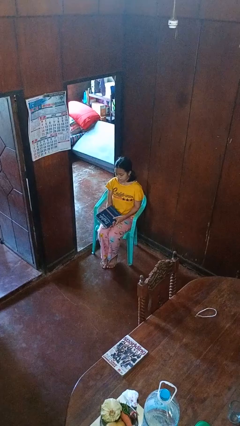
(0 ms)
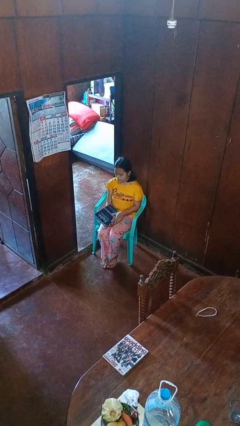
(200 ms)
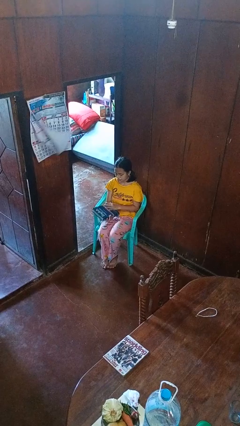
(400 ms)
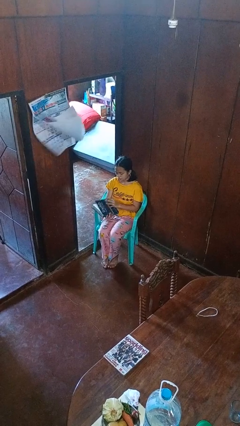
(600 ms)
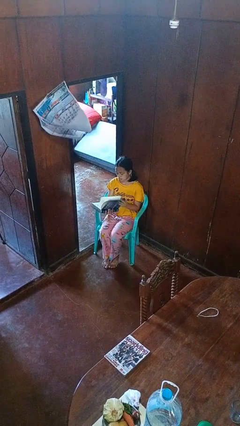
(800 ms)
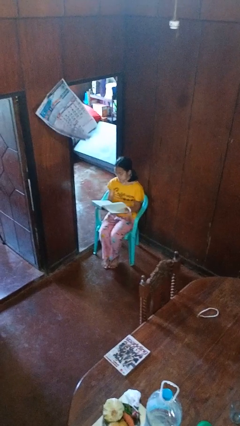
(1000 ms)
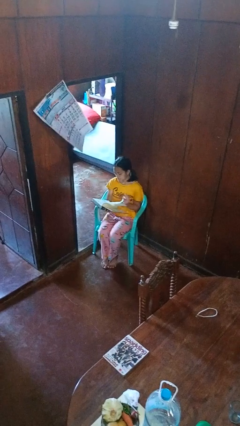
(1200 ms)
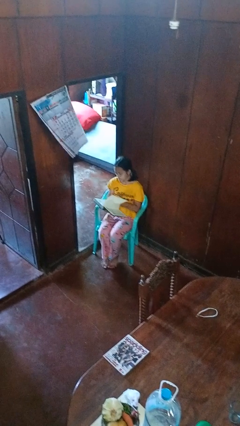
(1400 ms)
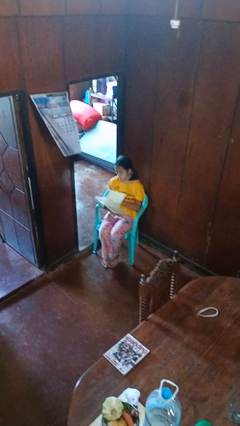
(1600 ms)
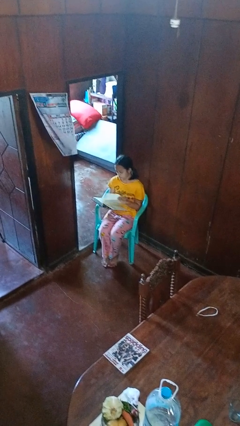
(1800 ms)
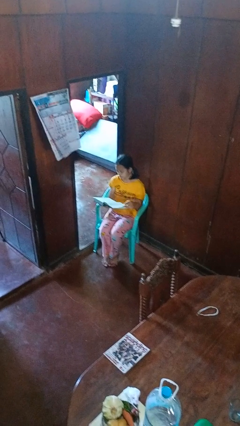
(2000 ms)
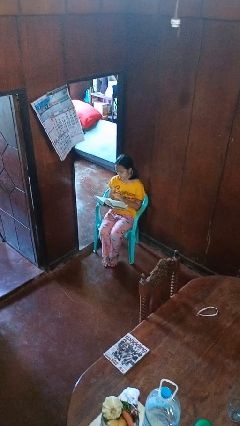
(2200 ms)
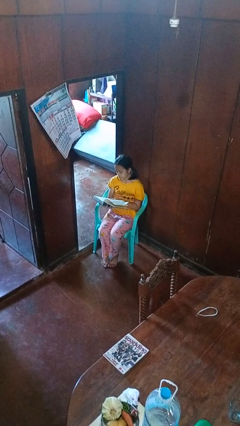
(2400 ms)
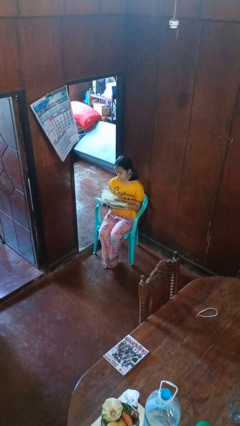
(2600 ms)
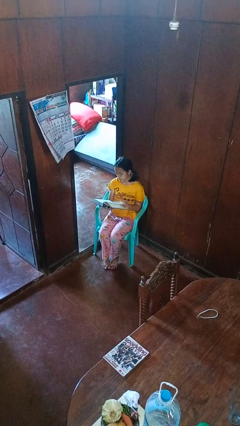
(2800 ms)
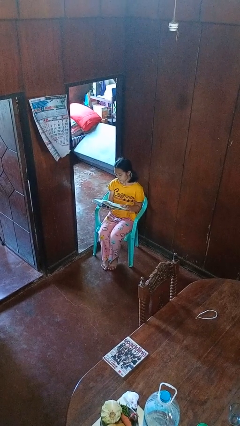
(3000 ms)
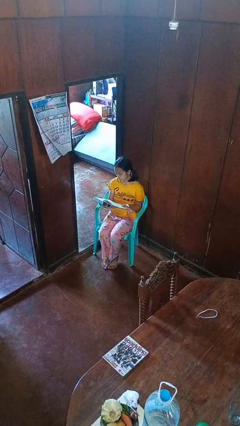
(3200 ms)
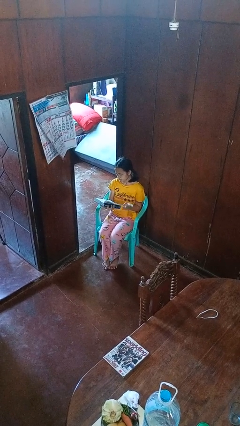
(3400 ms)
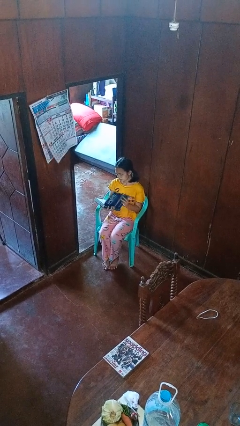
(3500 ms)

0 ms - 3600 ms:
person reads book

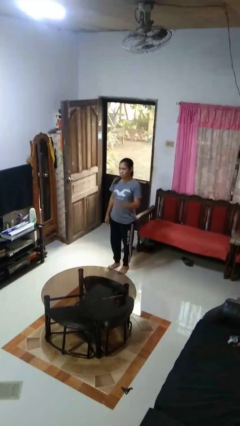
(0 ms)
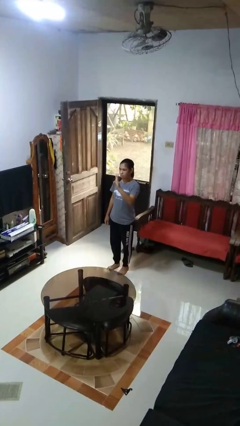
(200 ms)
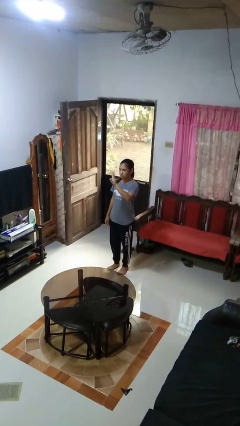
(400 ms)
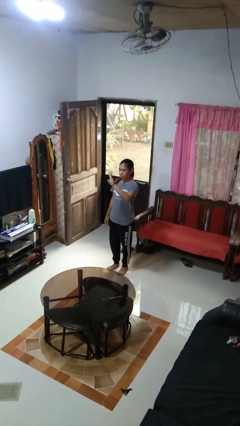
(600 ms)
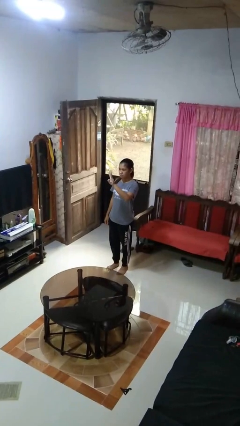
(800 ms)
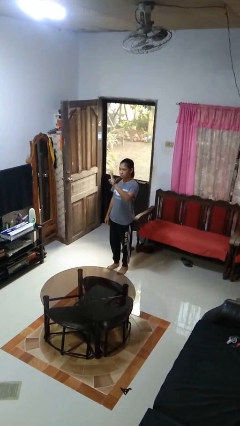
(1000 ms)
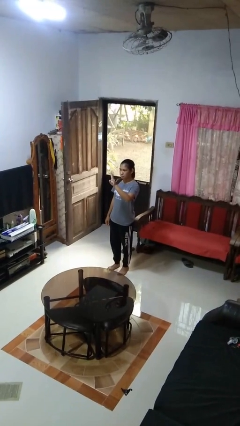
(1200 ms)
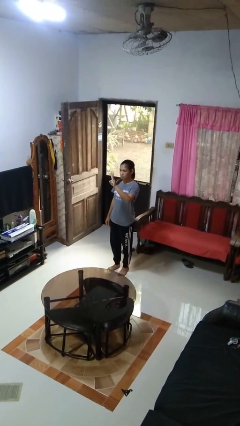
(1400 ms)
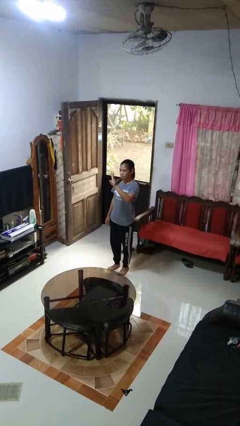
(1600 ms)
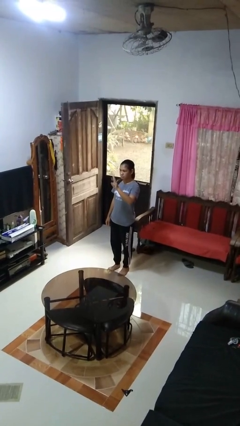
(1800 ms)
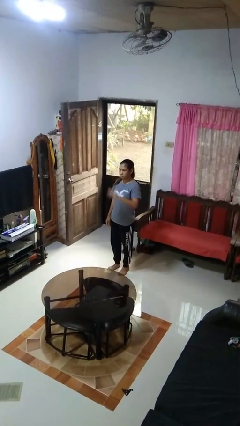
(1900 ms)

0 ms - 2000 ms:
person gestures number three

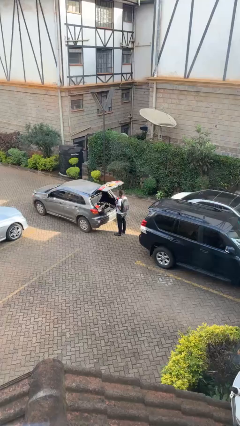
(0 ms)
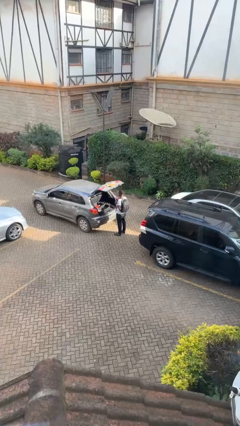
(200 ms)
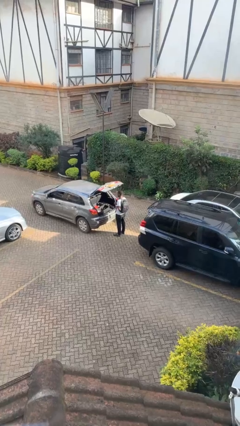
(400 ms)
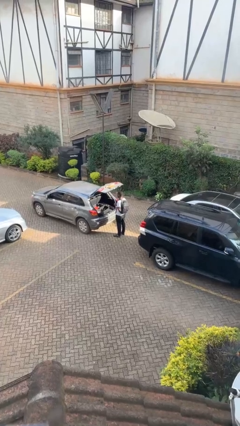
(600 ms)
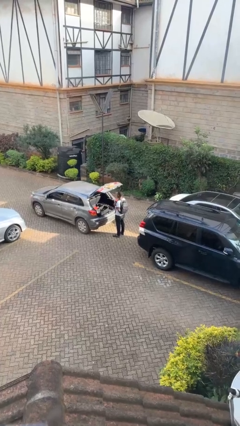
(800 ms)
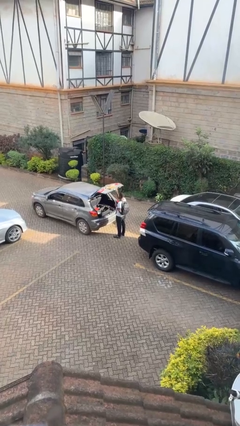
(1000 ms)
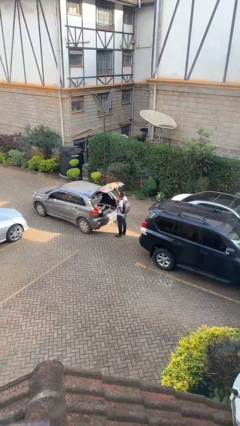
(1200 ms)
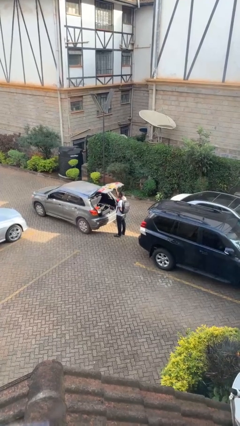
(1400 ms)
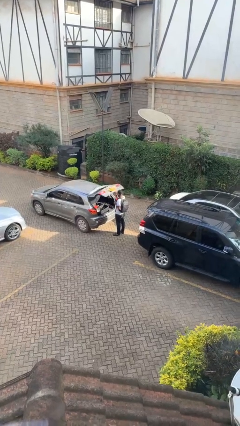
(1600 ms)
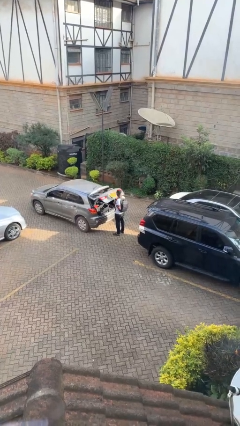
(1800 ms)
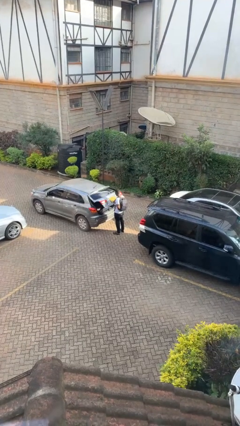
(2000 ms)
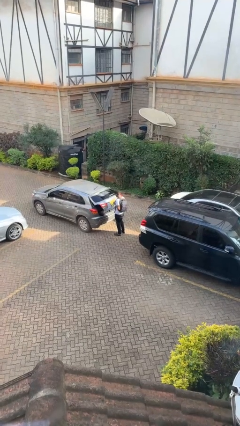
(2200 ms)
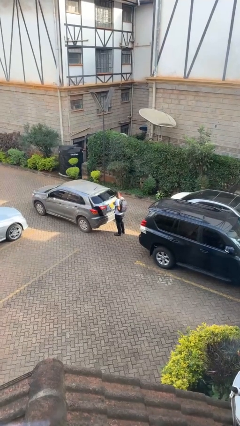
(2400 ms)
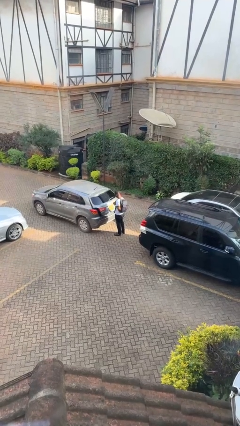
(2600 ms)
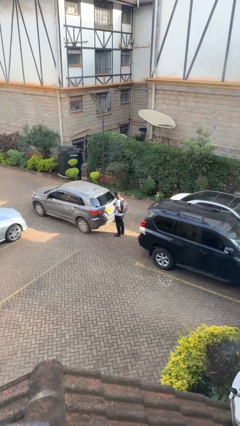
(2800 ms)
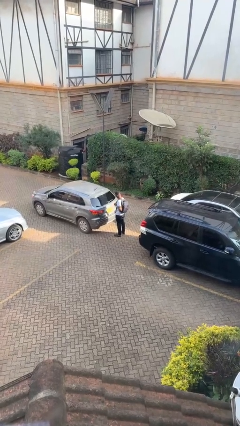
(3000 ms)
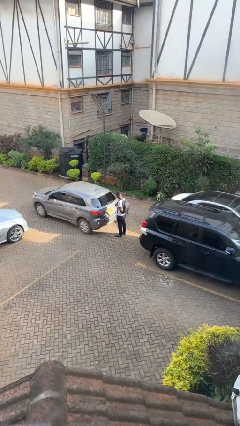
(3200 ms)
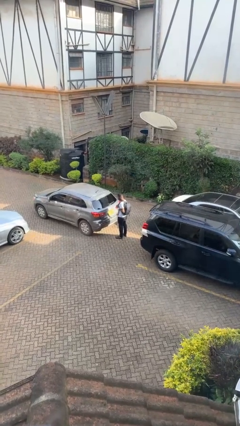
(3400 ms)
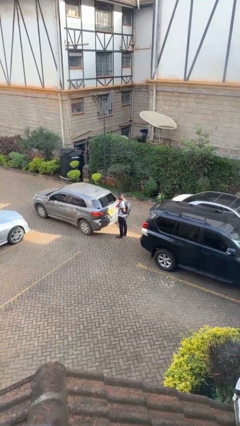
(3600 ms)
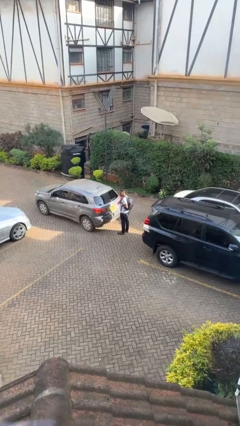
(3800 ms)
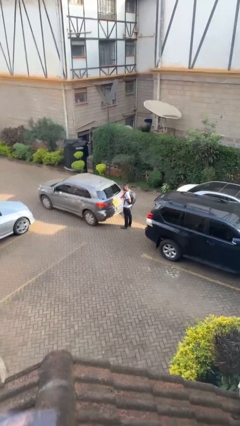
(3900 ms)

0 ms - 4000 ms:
person closes car trunk

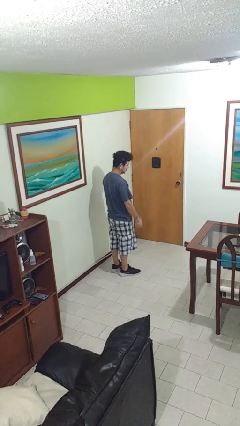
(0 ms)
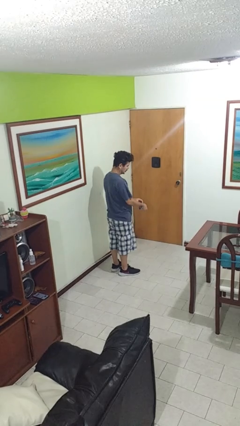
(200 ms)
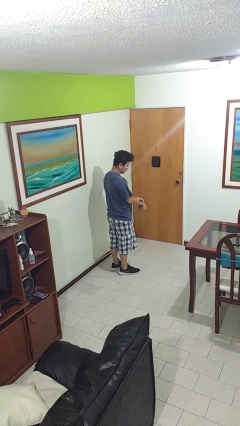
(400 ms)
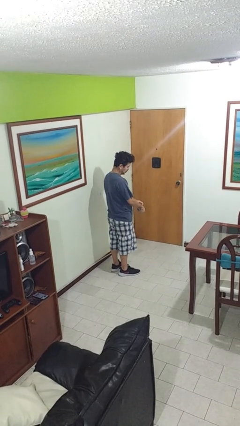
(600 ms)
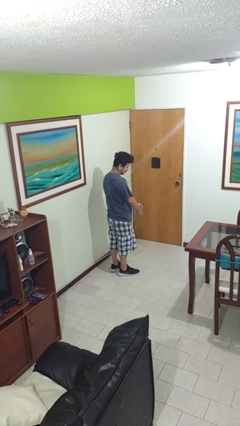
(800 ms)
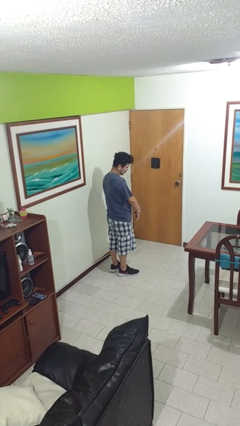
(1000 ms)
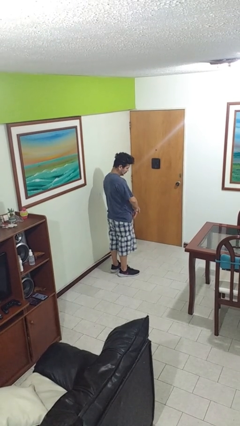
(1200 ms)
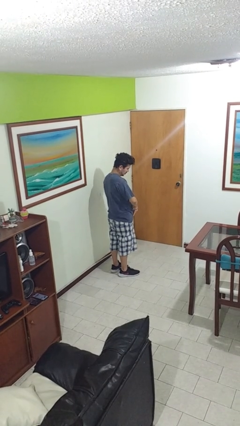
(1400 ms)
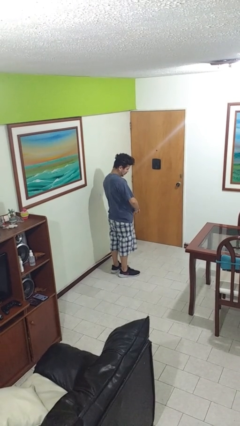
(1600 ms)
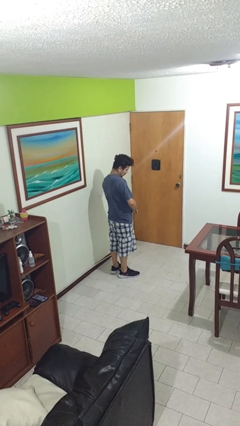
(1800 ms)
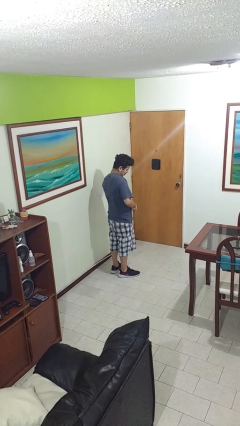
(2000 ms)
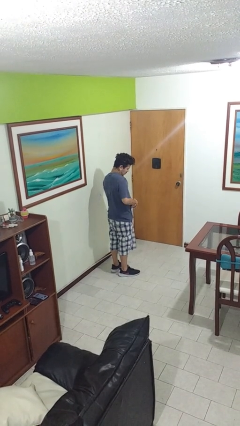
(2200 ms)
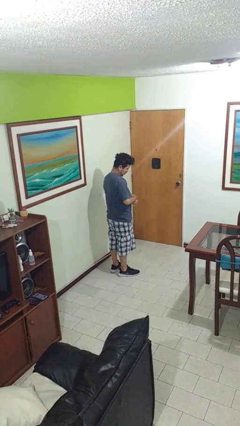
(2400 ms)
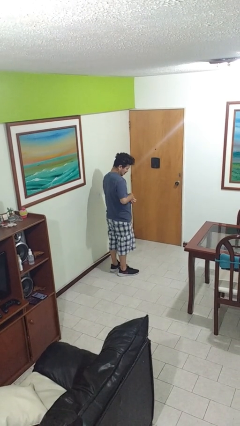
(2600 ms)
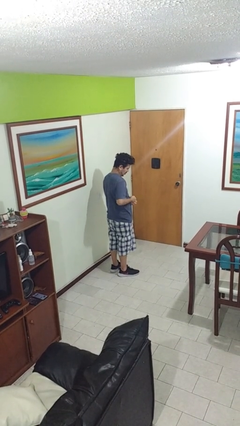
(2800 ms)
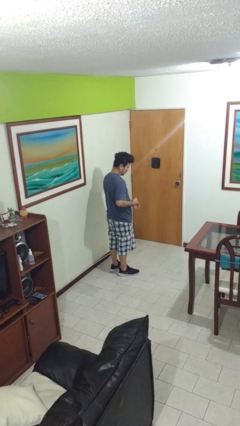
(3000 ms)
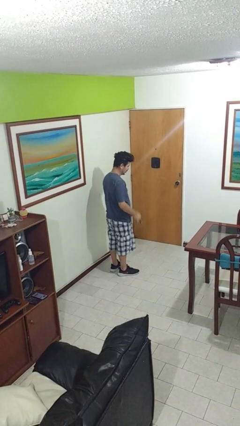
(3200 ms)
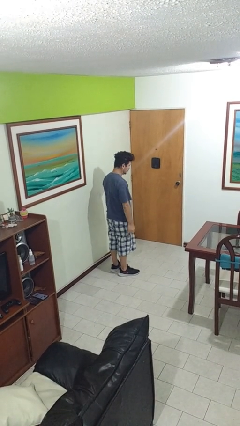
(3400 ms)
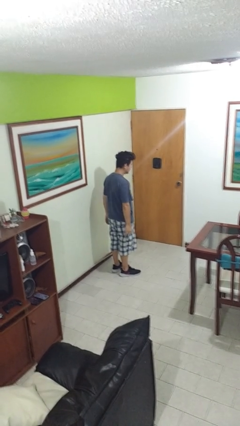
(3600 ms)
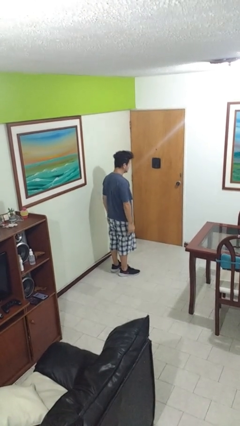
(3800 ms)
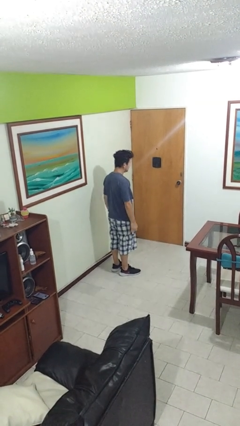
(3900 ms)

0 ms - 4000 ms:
person takes off wristwatch

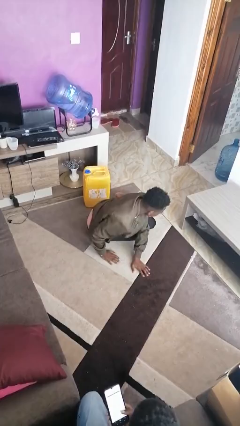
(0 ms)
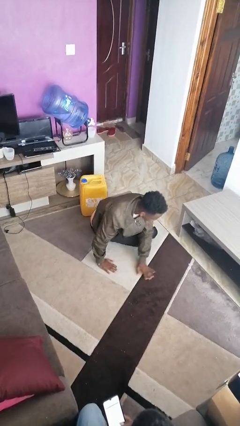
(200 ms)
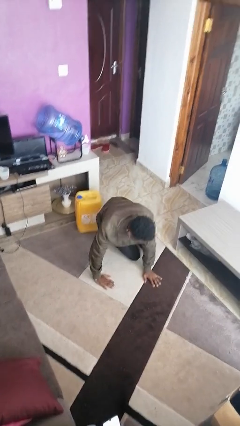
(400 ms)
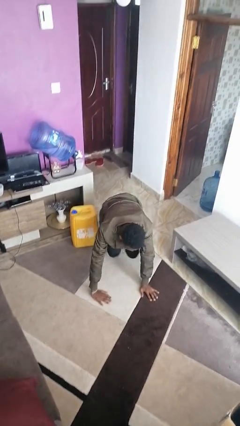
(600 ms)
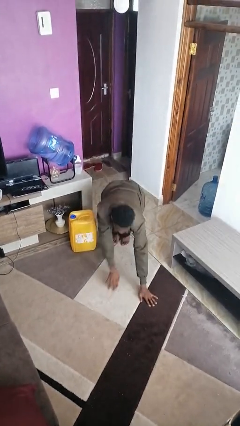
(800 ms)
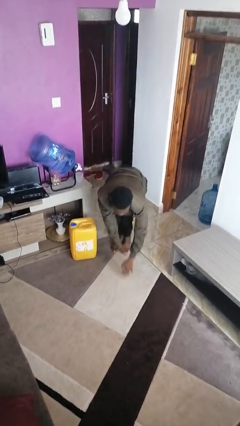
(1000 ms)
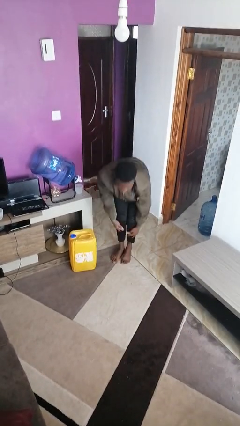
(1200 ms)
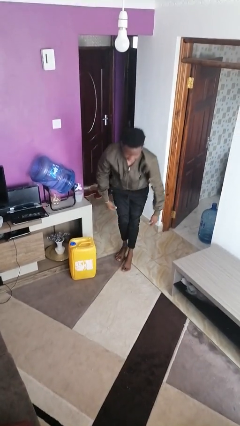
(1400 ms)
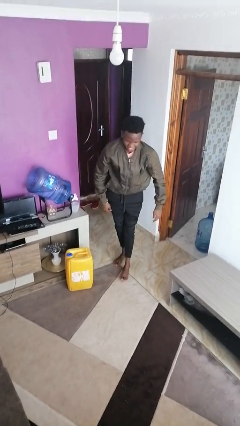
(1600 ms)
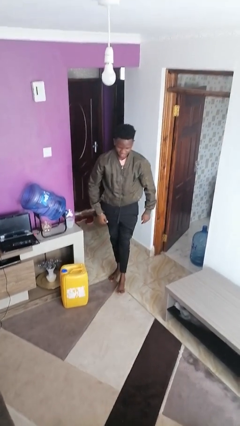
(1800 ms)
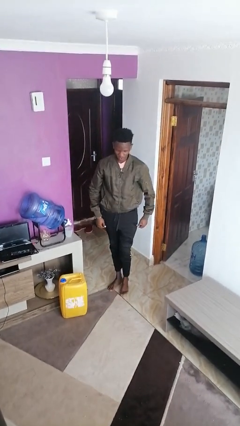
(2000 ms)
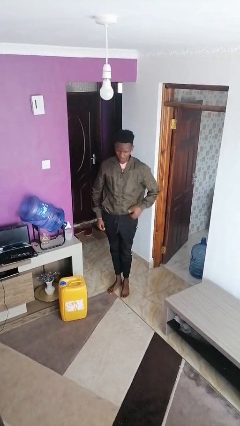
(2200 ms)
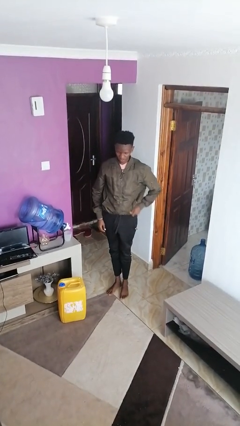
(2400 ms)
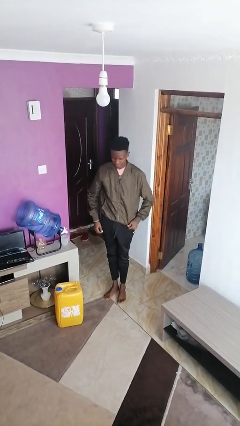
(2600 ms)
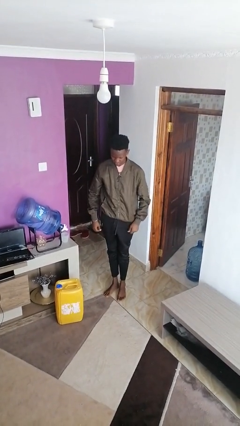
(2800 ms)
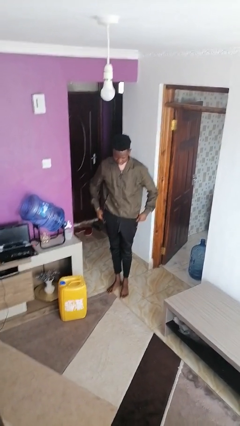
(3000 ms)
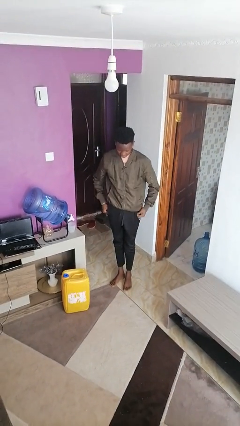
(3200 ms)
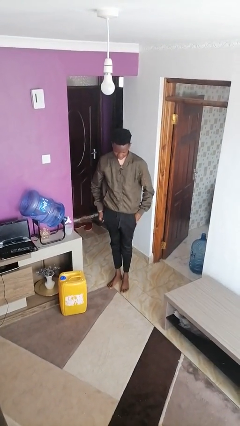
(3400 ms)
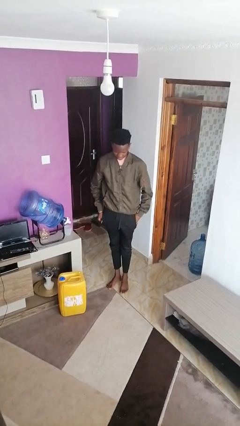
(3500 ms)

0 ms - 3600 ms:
person stands up from floor

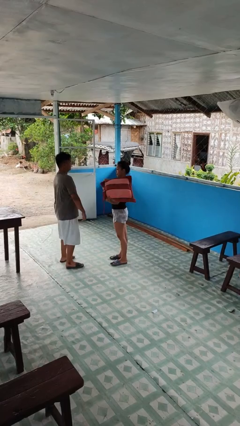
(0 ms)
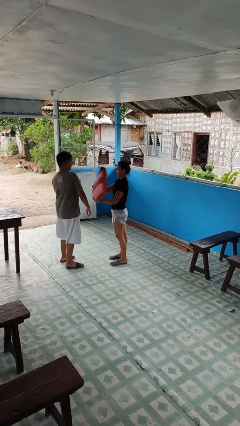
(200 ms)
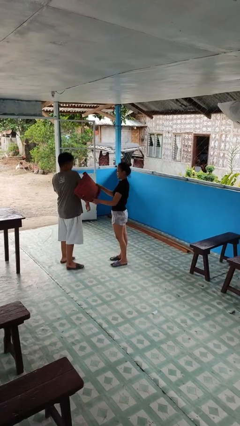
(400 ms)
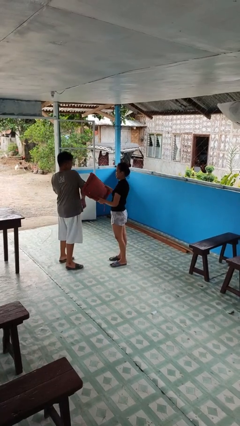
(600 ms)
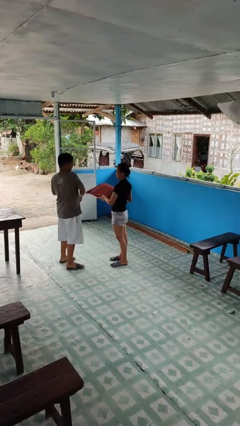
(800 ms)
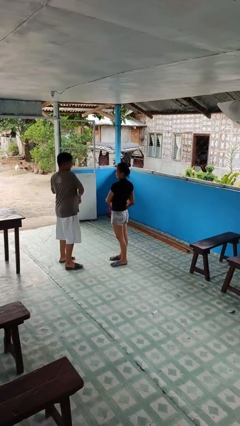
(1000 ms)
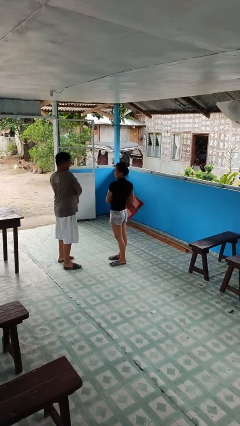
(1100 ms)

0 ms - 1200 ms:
person hits person with pillow
